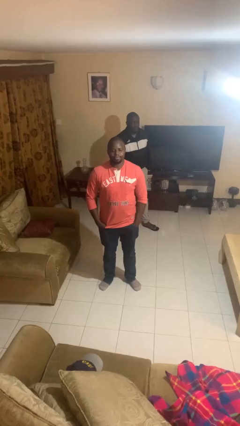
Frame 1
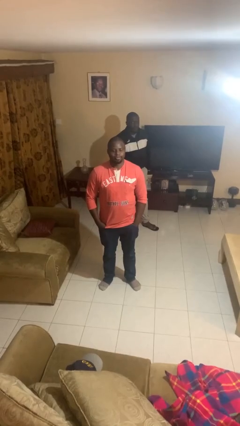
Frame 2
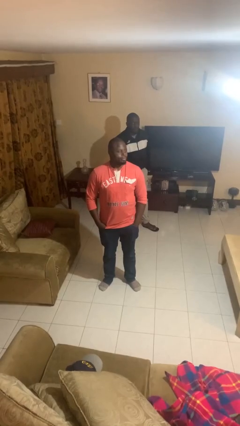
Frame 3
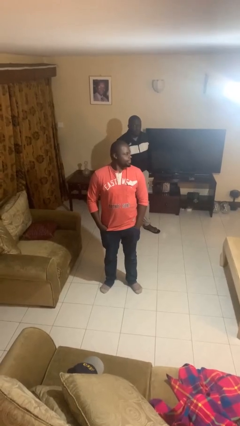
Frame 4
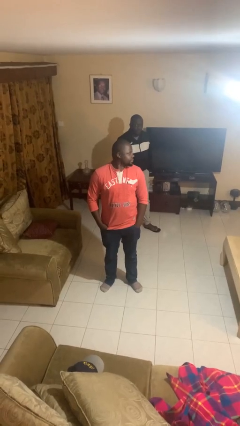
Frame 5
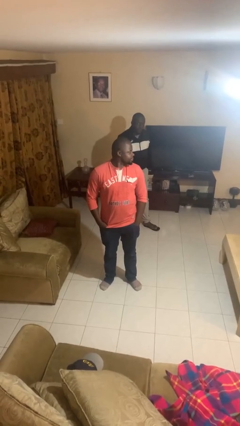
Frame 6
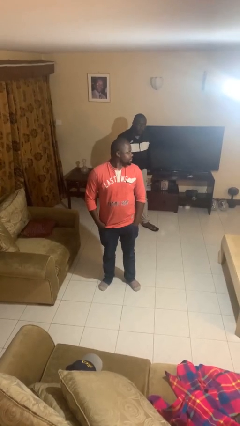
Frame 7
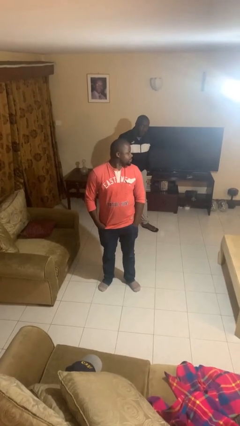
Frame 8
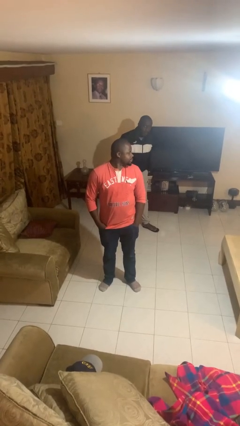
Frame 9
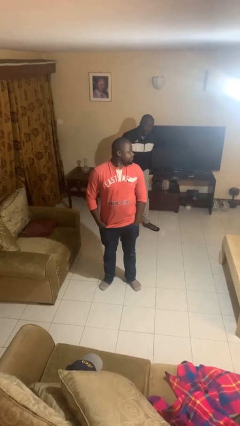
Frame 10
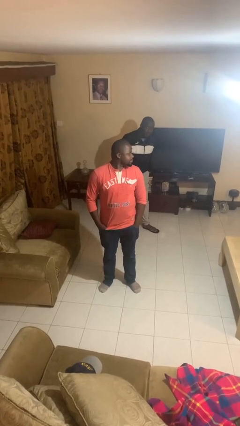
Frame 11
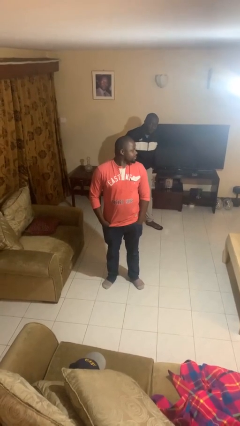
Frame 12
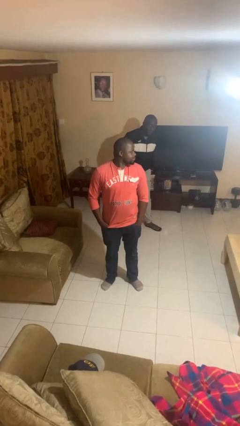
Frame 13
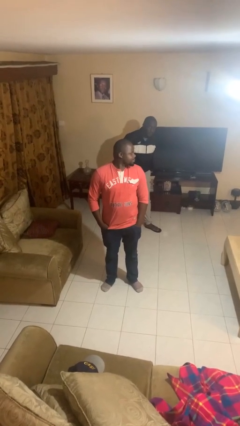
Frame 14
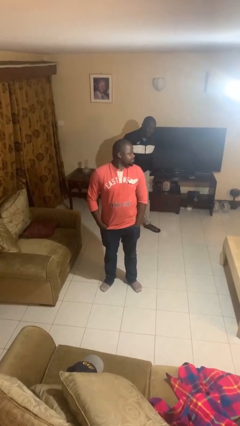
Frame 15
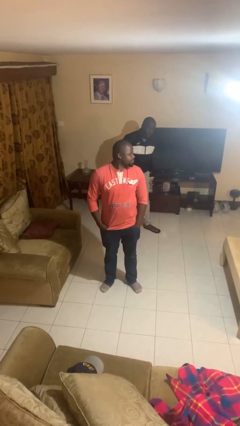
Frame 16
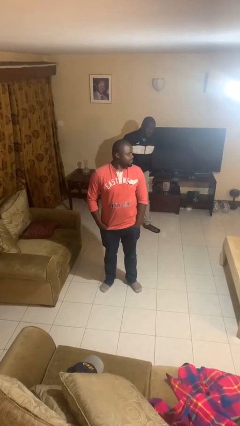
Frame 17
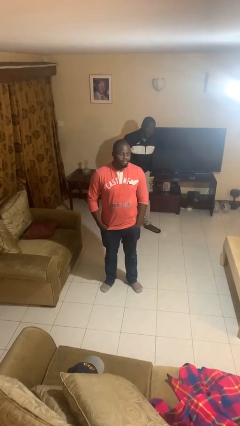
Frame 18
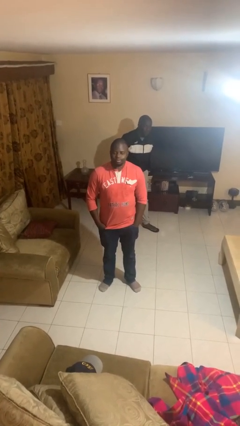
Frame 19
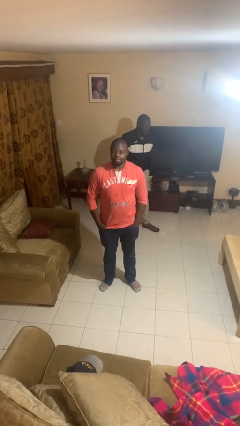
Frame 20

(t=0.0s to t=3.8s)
person looks over shoulder

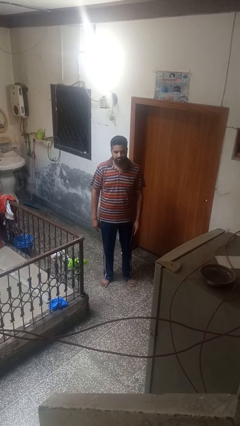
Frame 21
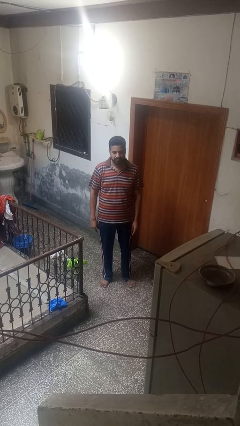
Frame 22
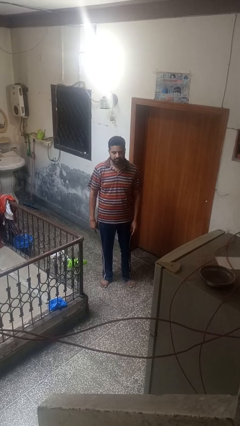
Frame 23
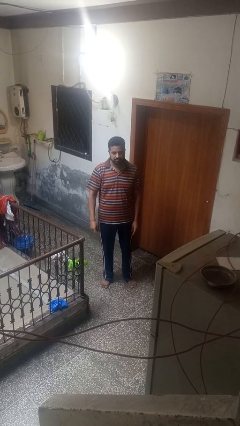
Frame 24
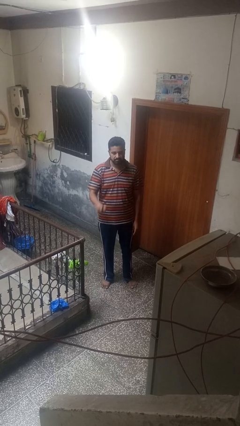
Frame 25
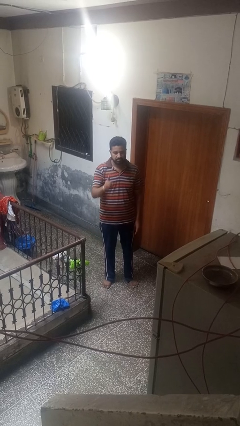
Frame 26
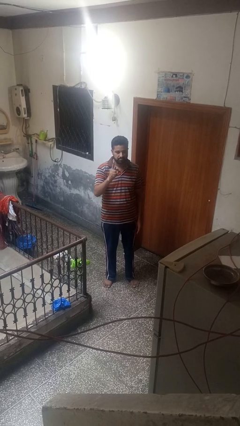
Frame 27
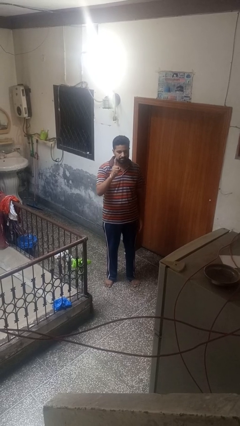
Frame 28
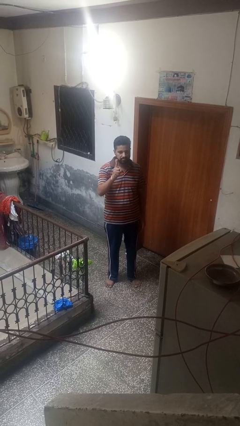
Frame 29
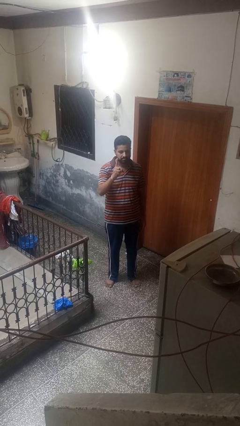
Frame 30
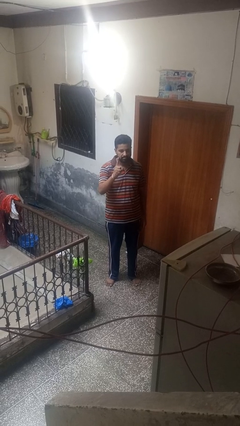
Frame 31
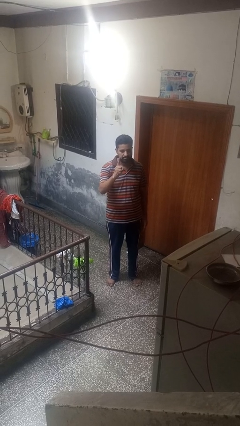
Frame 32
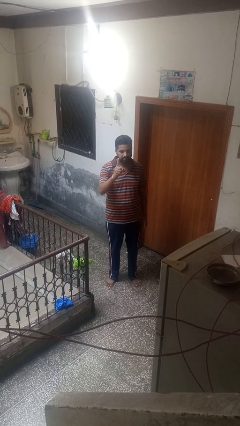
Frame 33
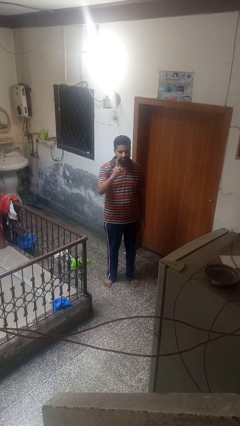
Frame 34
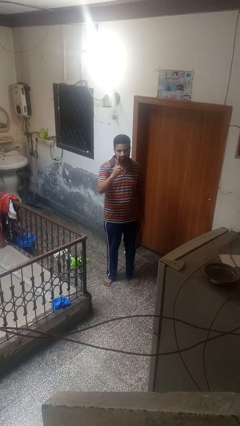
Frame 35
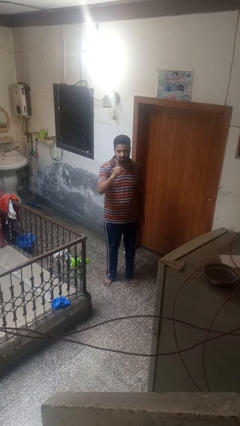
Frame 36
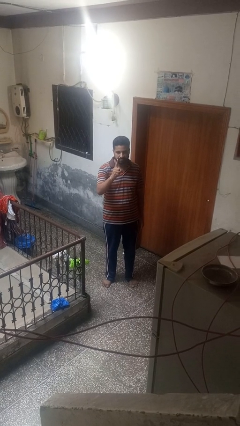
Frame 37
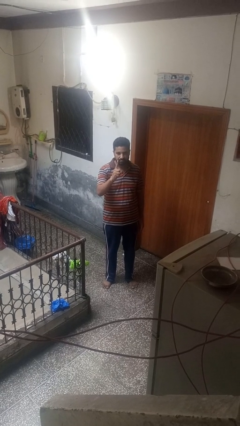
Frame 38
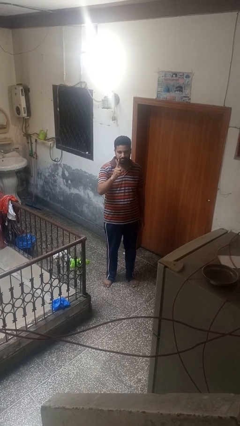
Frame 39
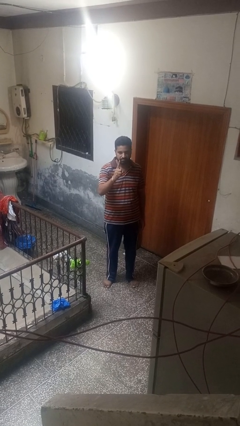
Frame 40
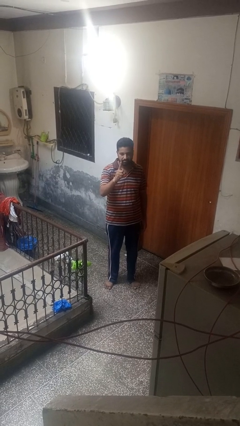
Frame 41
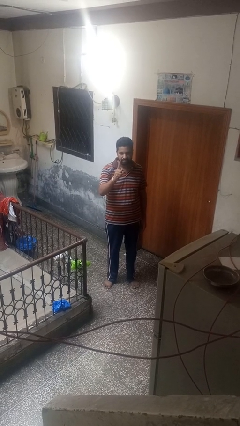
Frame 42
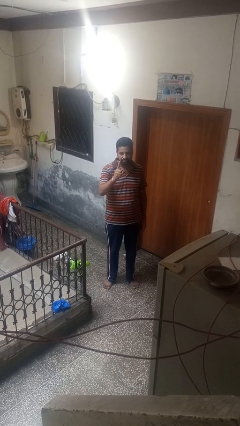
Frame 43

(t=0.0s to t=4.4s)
person gestures number one

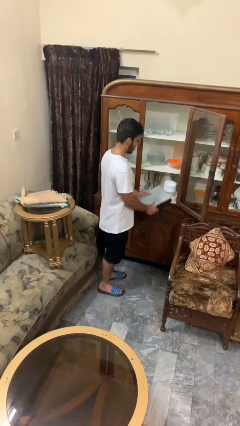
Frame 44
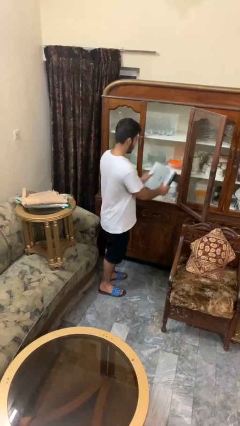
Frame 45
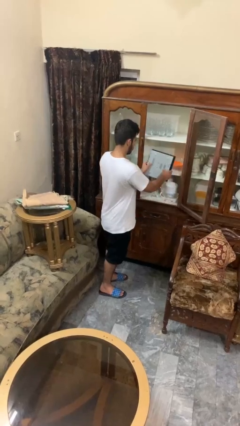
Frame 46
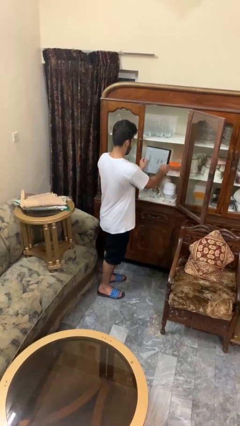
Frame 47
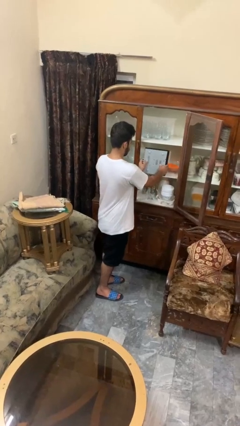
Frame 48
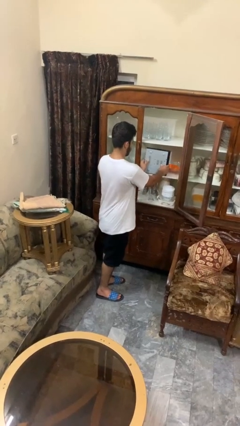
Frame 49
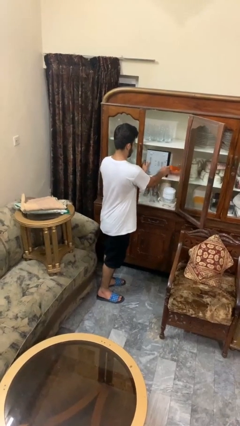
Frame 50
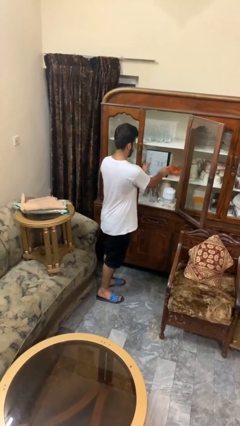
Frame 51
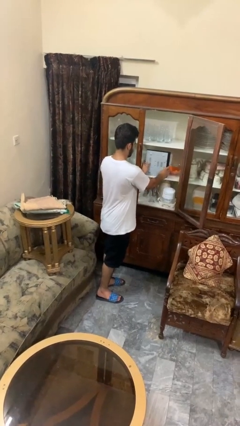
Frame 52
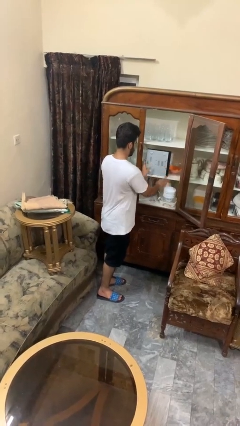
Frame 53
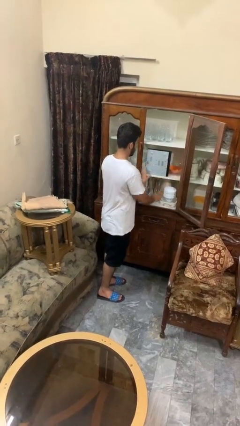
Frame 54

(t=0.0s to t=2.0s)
person puts down object into cabinet

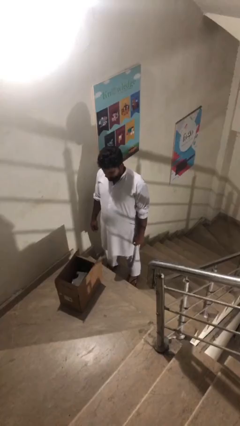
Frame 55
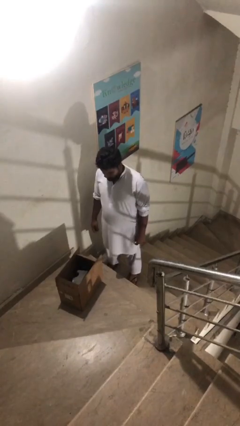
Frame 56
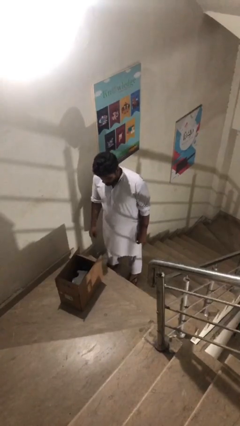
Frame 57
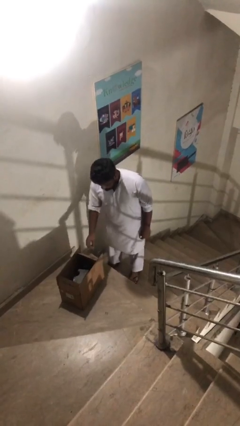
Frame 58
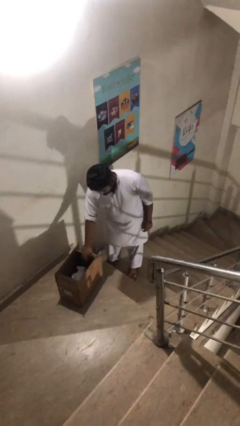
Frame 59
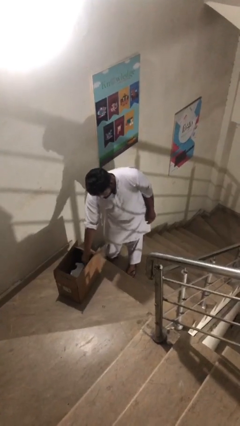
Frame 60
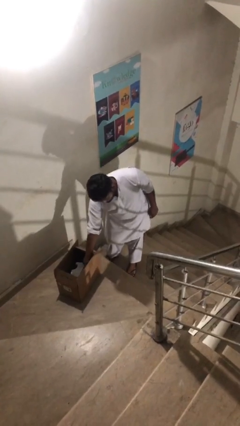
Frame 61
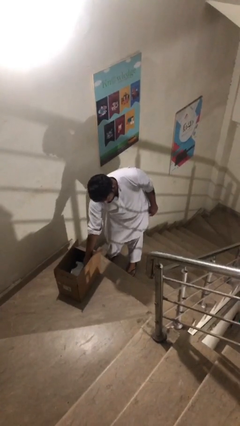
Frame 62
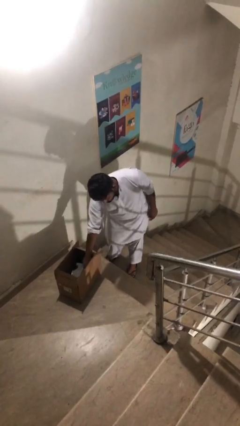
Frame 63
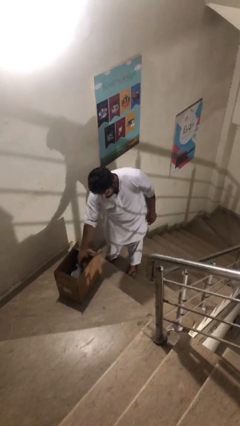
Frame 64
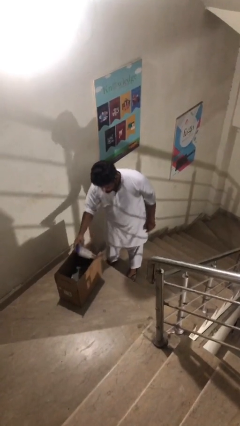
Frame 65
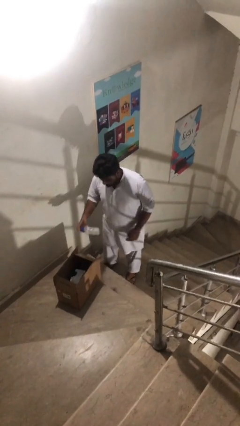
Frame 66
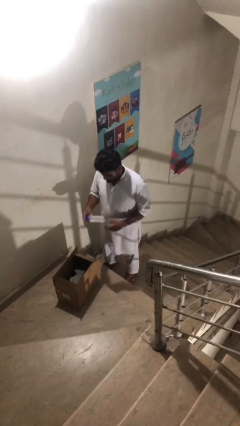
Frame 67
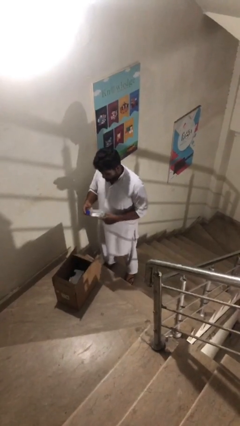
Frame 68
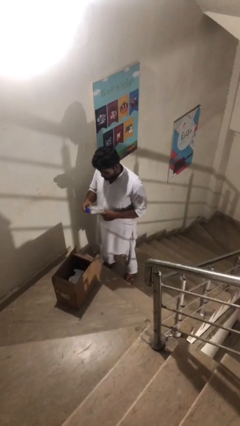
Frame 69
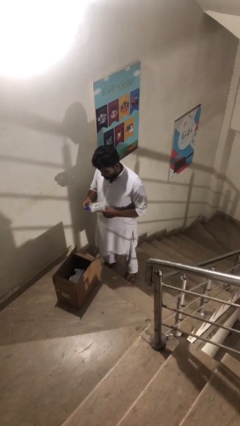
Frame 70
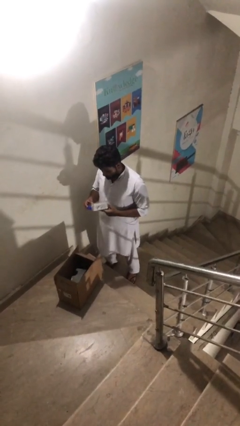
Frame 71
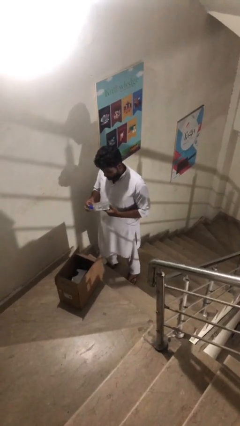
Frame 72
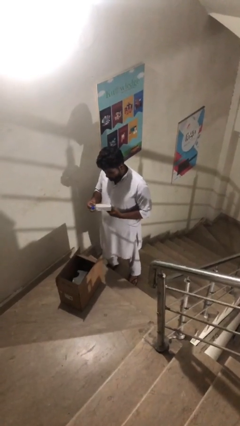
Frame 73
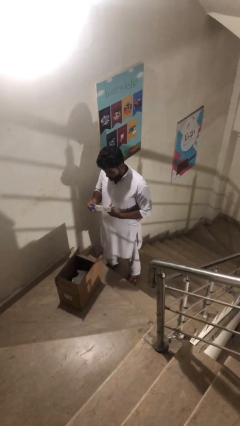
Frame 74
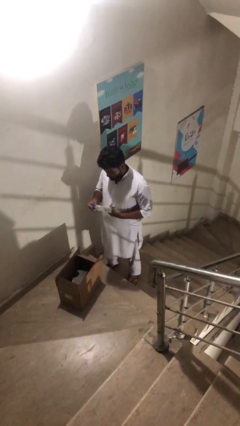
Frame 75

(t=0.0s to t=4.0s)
person takes object from box

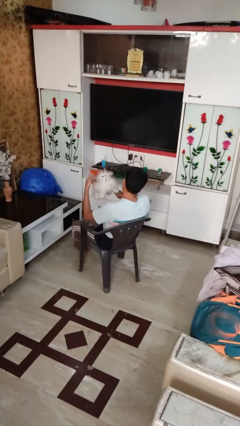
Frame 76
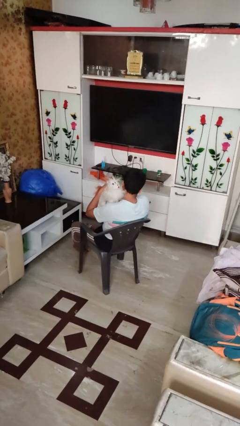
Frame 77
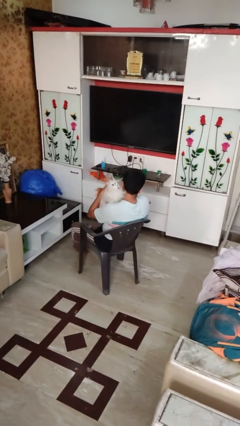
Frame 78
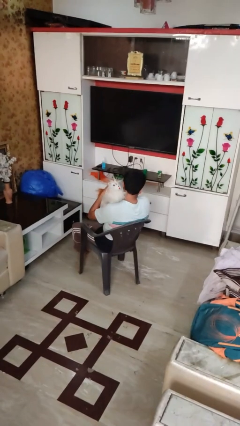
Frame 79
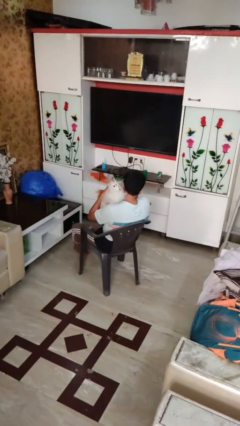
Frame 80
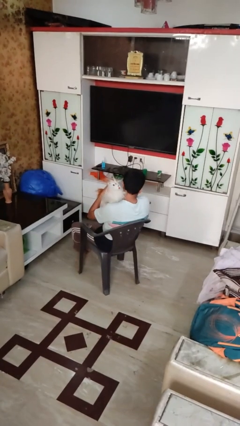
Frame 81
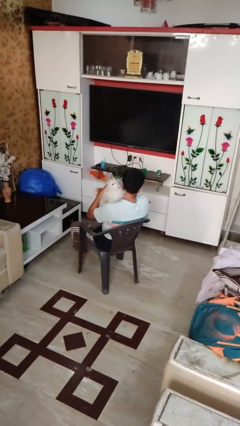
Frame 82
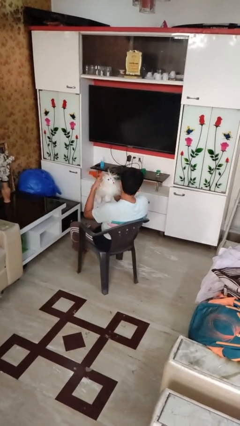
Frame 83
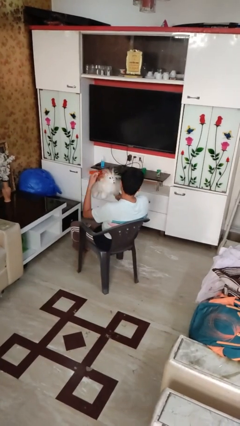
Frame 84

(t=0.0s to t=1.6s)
person hugs stuffed animal

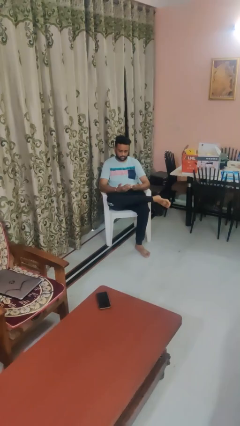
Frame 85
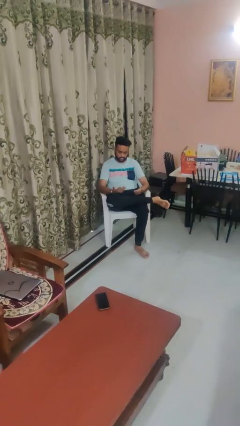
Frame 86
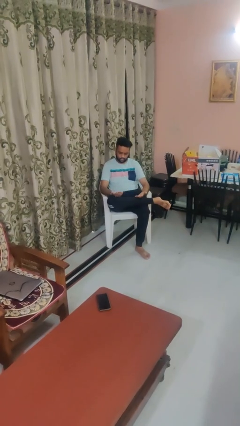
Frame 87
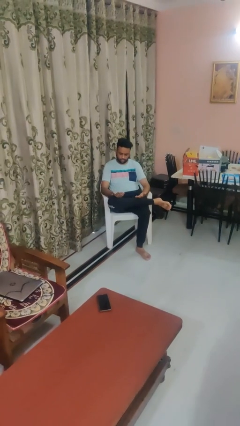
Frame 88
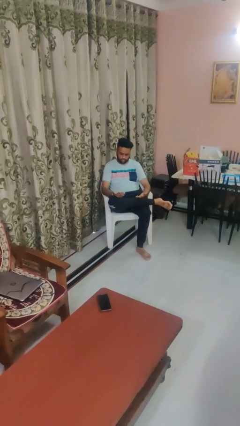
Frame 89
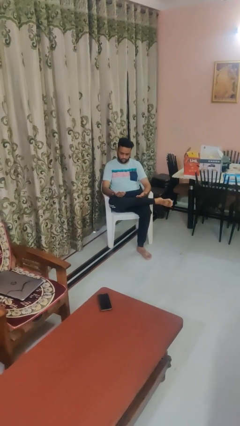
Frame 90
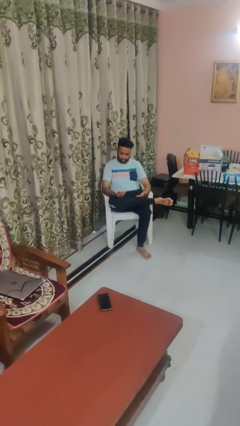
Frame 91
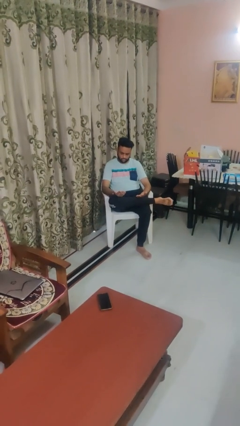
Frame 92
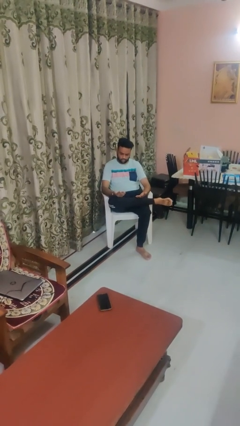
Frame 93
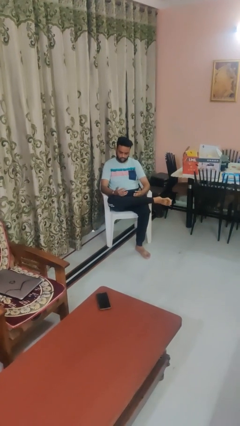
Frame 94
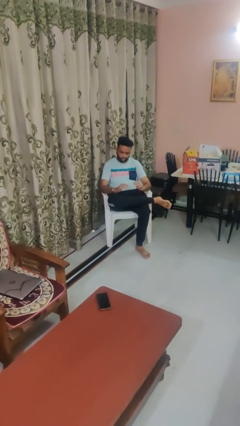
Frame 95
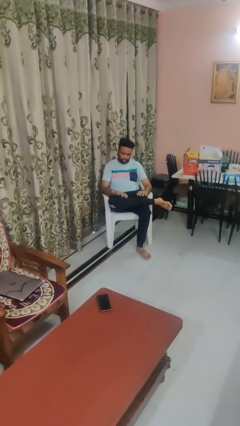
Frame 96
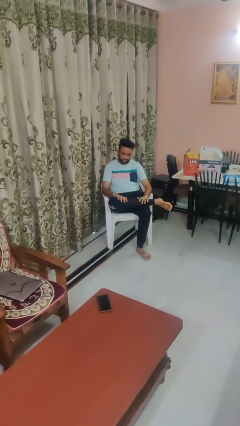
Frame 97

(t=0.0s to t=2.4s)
person looks at hands in lap
